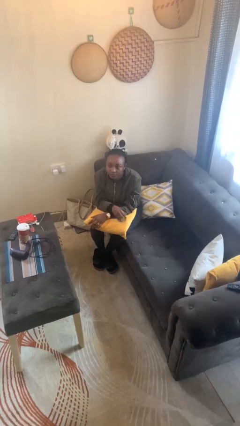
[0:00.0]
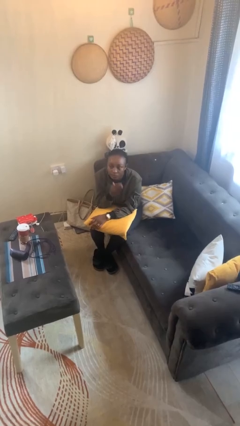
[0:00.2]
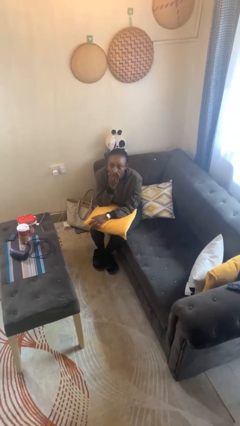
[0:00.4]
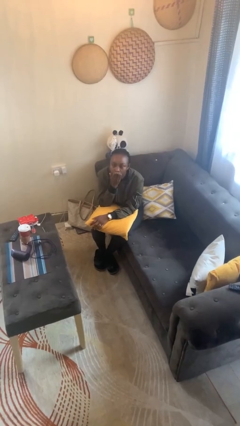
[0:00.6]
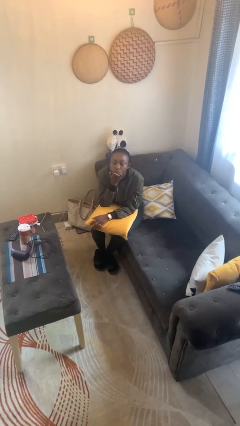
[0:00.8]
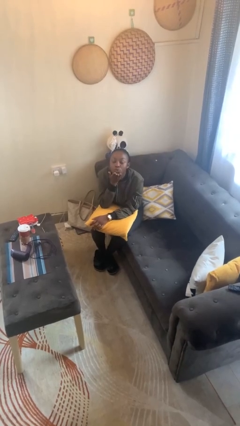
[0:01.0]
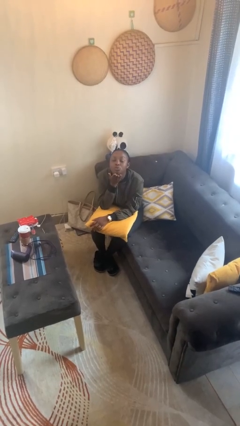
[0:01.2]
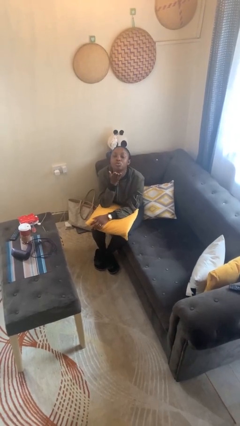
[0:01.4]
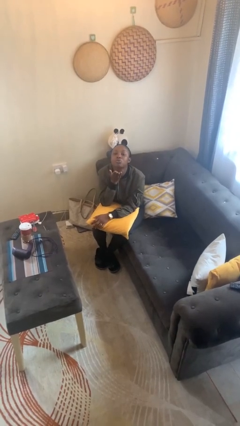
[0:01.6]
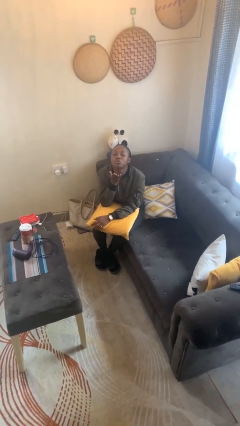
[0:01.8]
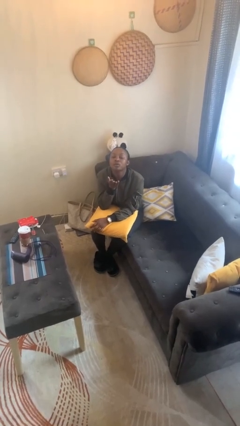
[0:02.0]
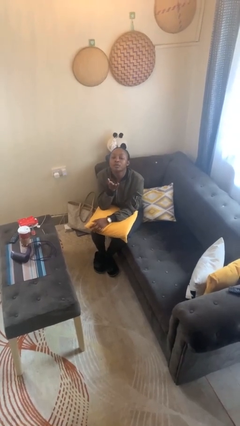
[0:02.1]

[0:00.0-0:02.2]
person gestures blow kiss

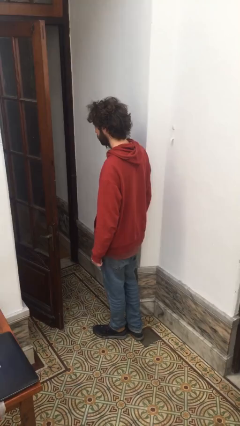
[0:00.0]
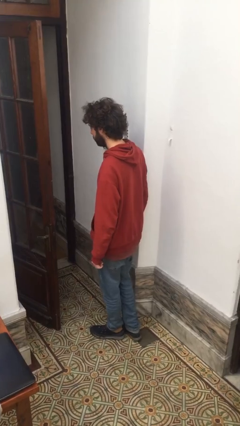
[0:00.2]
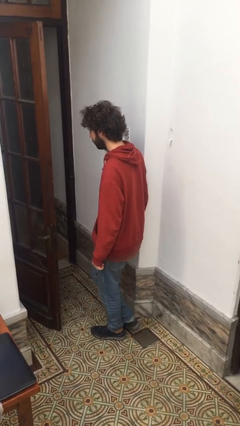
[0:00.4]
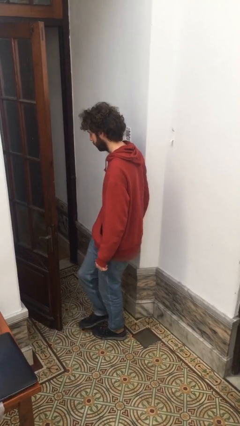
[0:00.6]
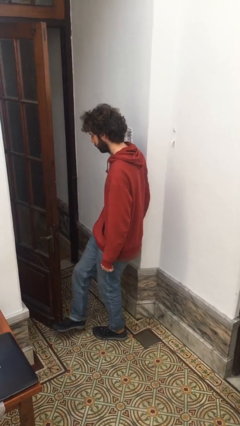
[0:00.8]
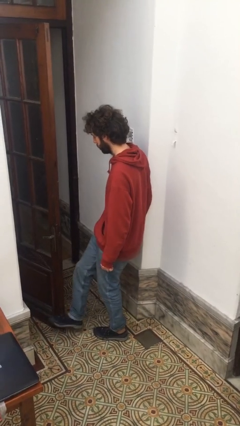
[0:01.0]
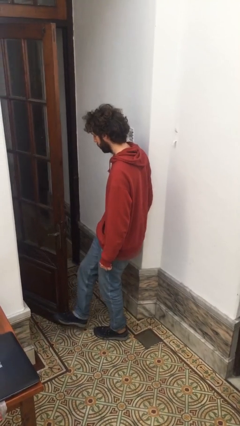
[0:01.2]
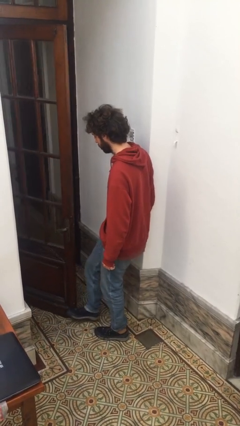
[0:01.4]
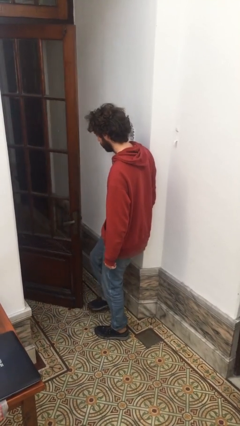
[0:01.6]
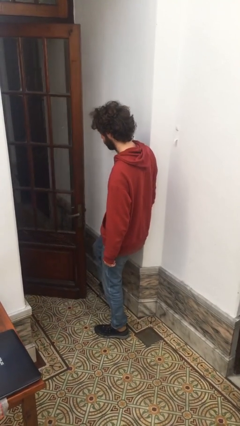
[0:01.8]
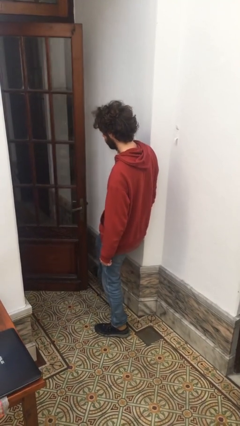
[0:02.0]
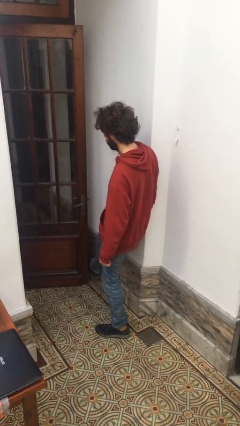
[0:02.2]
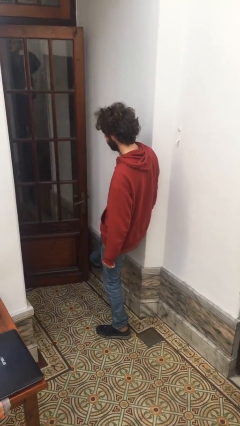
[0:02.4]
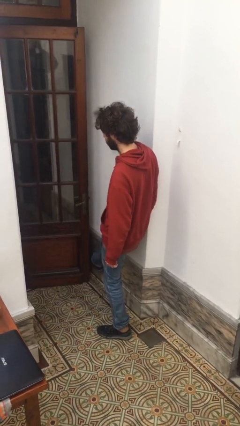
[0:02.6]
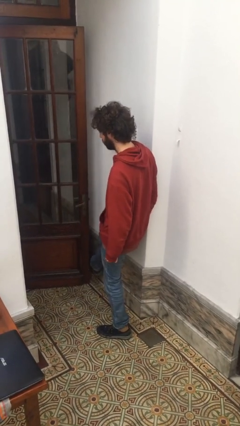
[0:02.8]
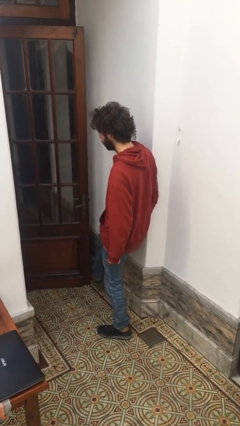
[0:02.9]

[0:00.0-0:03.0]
person closes door with foot

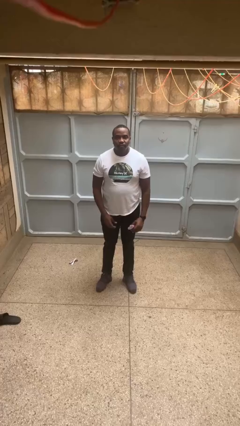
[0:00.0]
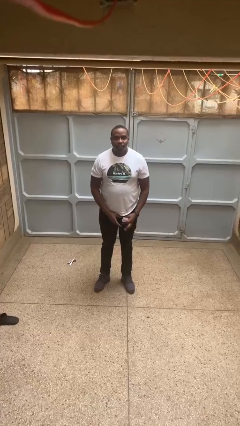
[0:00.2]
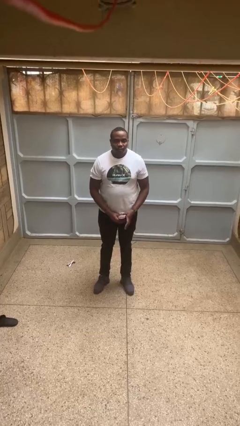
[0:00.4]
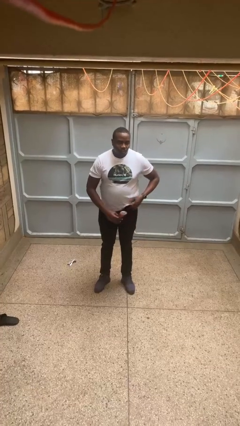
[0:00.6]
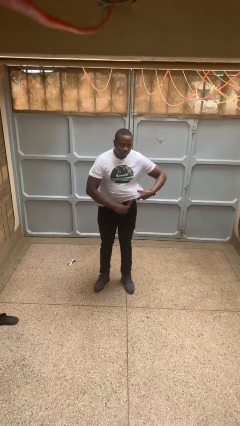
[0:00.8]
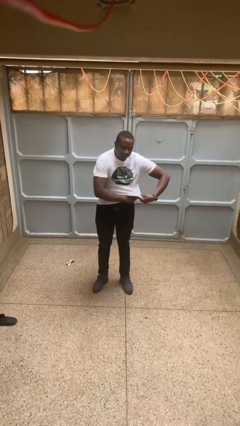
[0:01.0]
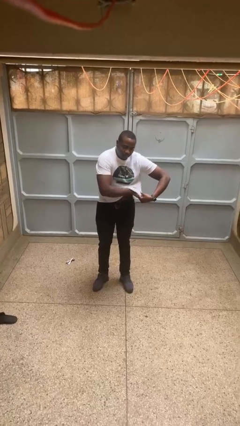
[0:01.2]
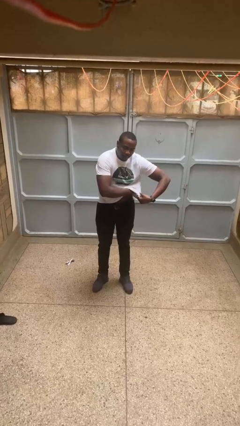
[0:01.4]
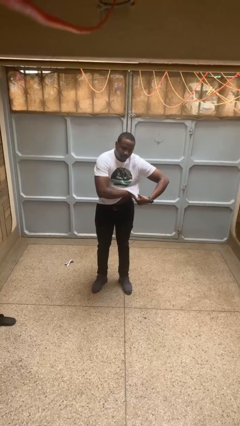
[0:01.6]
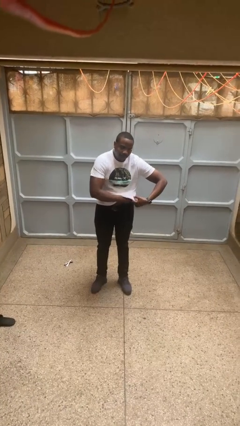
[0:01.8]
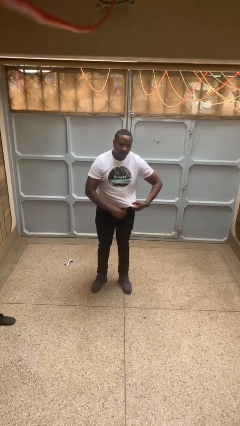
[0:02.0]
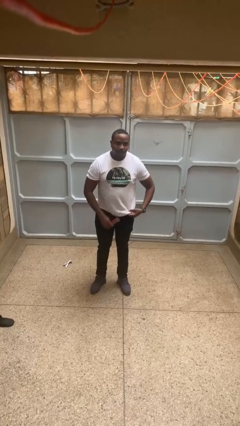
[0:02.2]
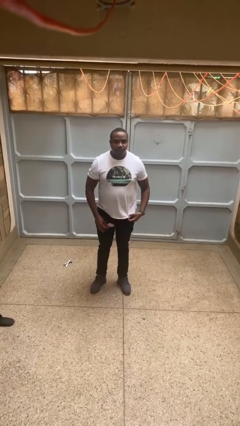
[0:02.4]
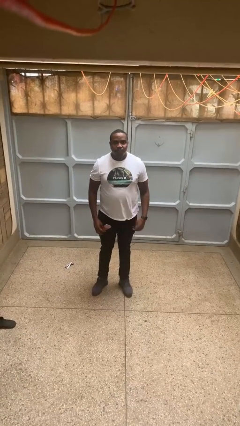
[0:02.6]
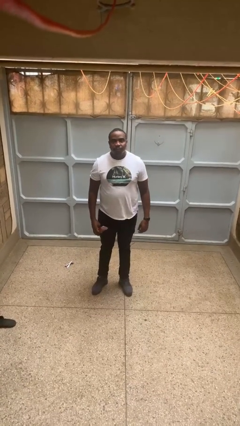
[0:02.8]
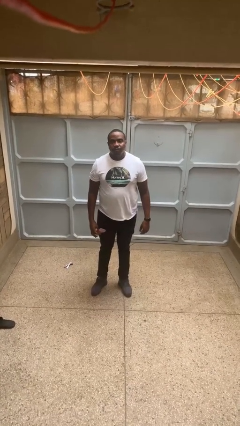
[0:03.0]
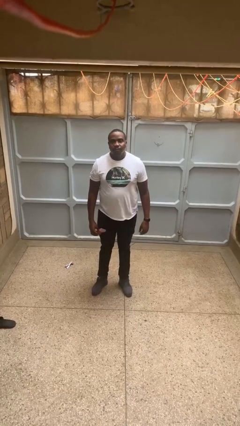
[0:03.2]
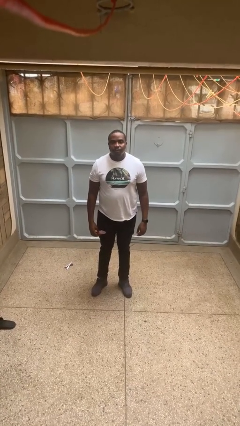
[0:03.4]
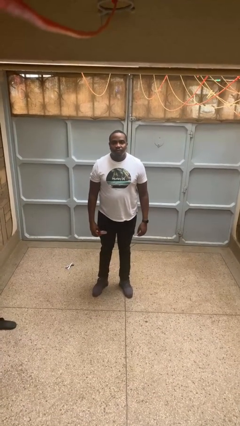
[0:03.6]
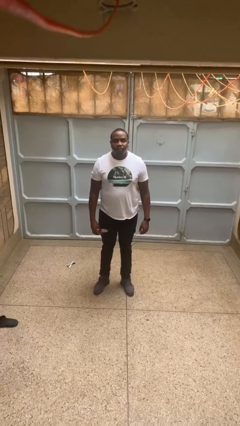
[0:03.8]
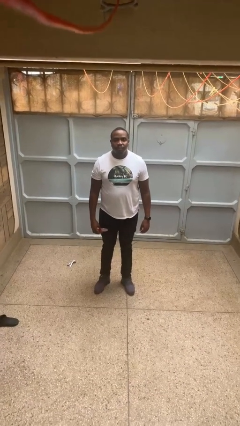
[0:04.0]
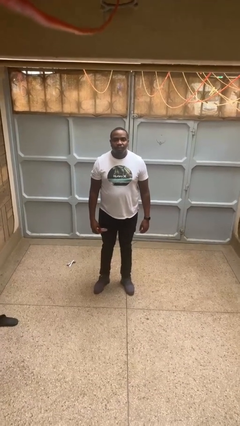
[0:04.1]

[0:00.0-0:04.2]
person applies deodorant

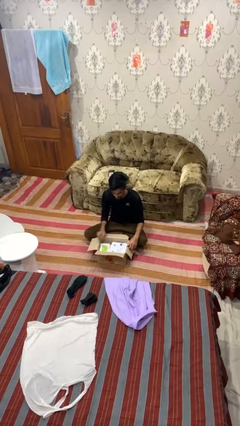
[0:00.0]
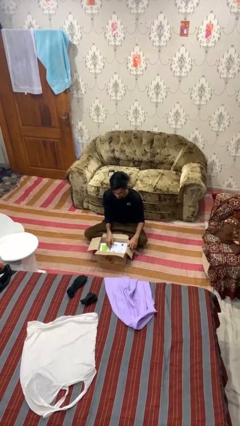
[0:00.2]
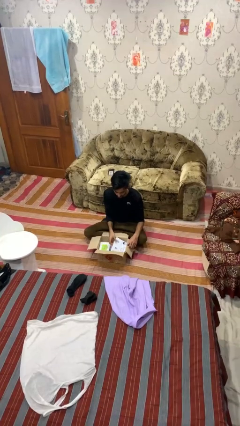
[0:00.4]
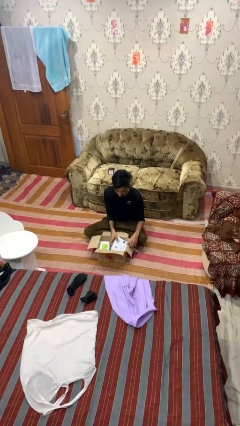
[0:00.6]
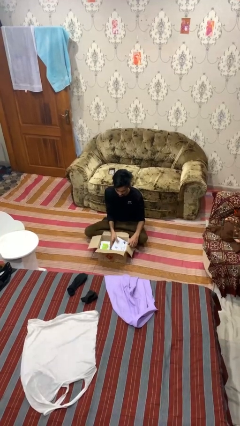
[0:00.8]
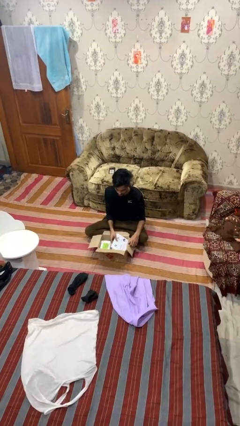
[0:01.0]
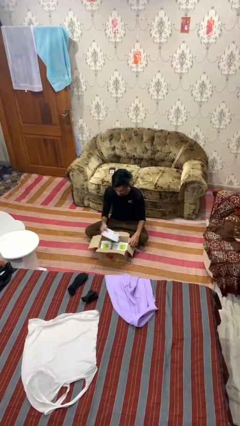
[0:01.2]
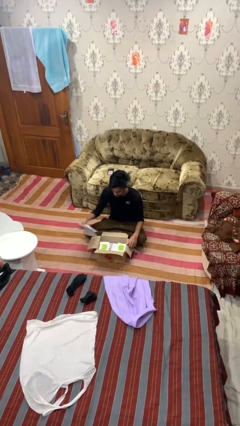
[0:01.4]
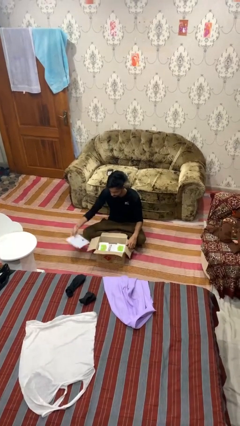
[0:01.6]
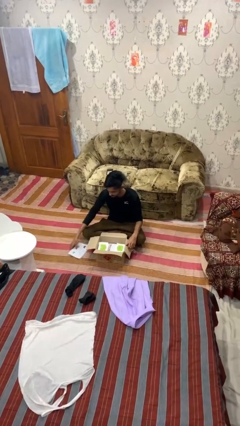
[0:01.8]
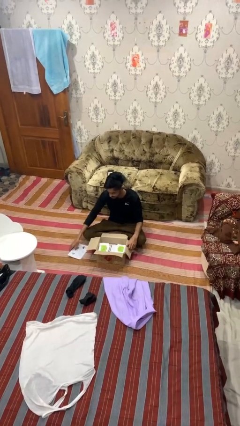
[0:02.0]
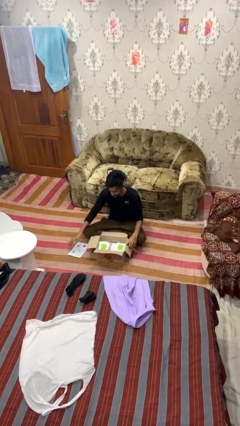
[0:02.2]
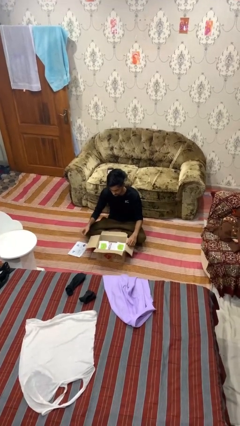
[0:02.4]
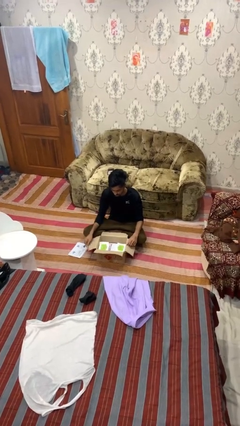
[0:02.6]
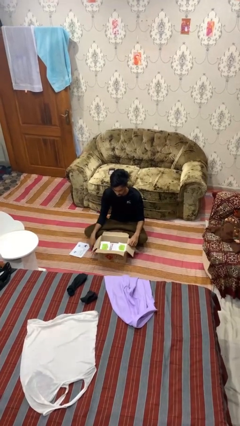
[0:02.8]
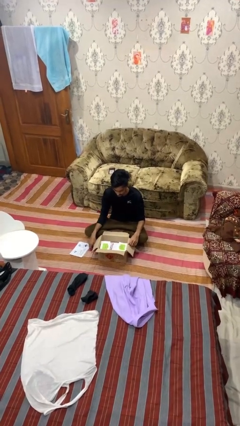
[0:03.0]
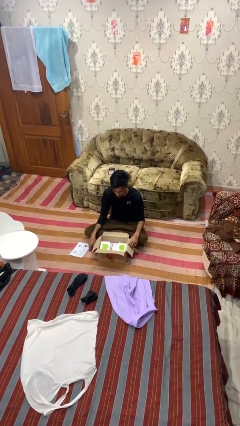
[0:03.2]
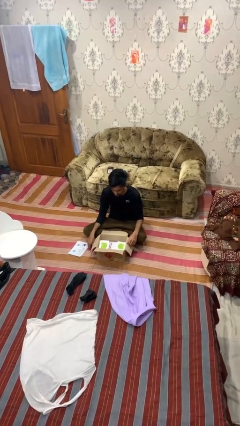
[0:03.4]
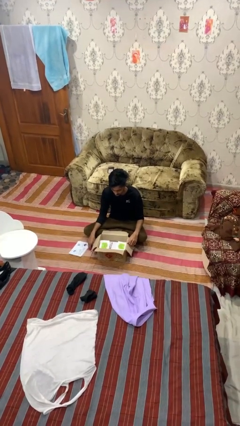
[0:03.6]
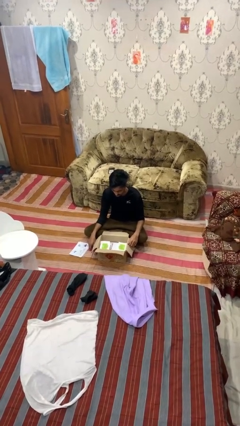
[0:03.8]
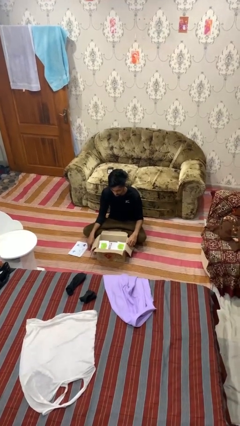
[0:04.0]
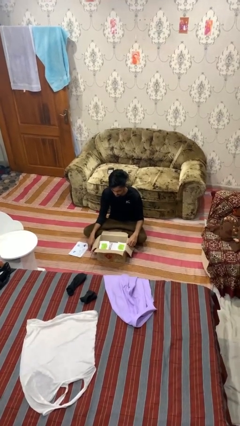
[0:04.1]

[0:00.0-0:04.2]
person takes object from box

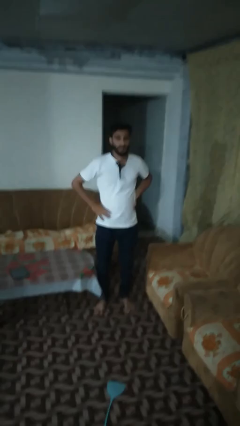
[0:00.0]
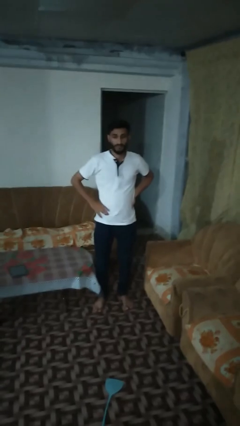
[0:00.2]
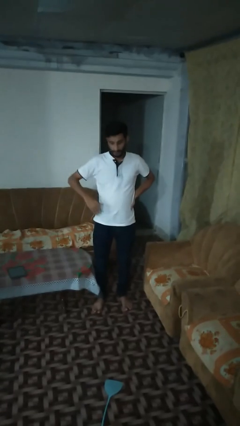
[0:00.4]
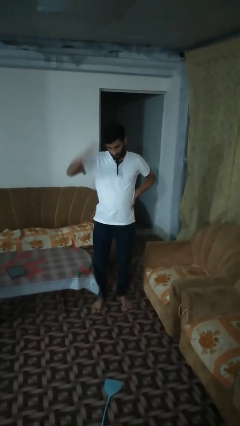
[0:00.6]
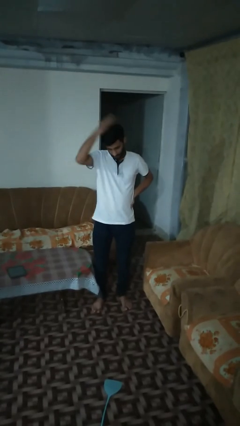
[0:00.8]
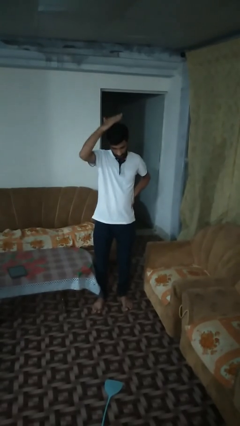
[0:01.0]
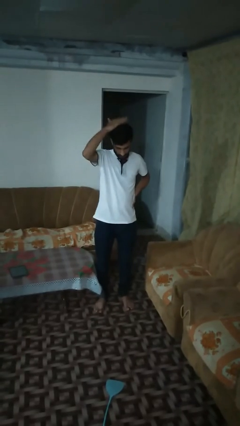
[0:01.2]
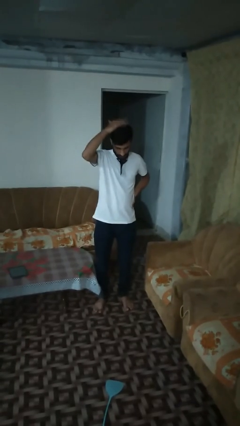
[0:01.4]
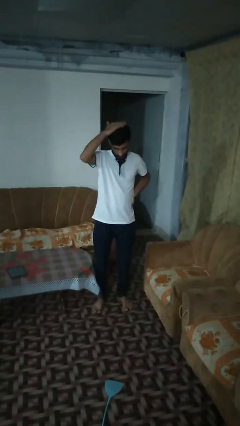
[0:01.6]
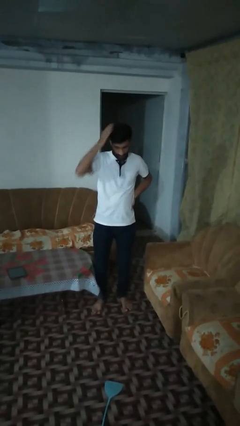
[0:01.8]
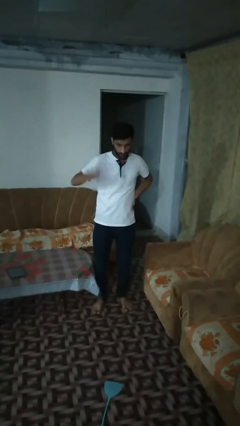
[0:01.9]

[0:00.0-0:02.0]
person pats head

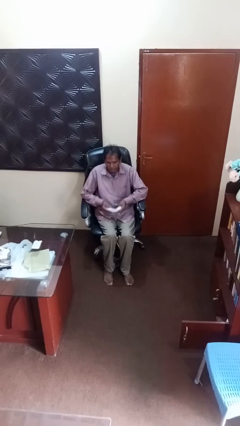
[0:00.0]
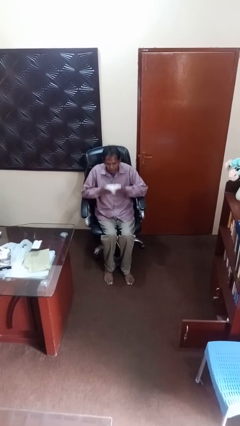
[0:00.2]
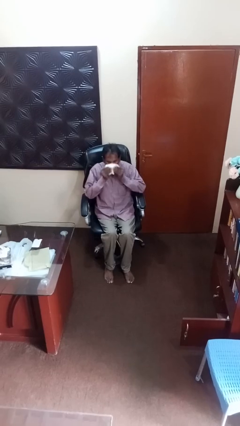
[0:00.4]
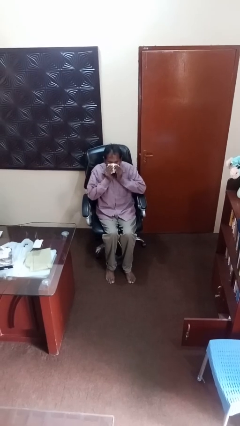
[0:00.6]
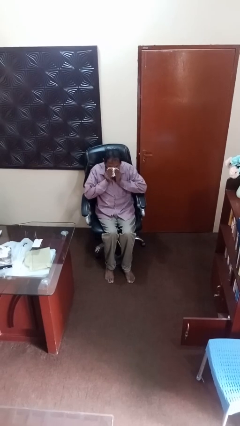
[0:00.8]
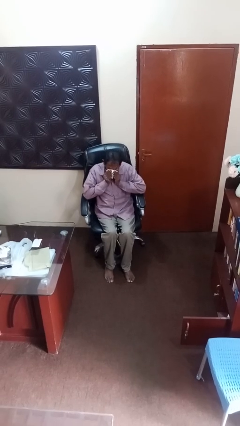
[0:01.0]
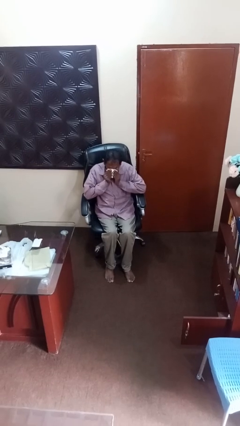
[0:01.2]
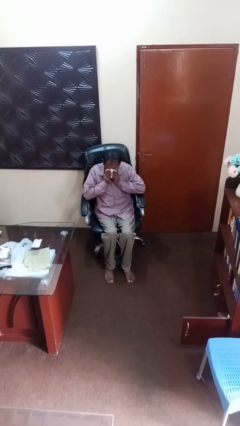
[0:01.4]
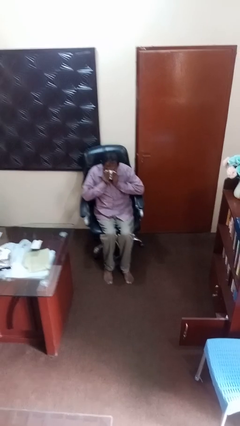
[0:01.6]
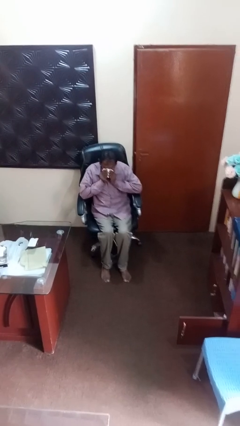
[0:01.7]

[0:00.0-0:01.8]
person blows nose
